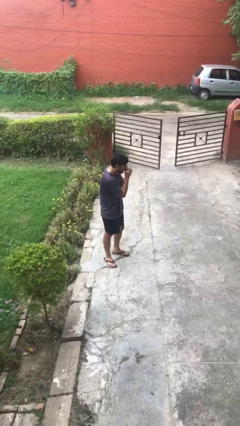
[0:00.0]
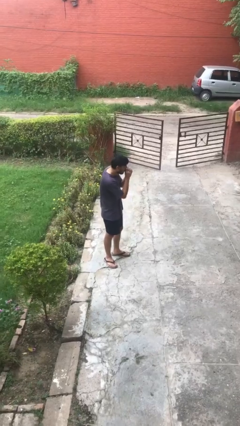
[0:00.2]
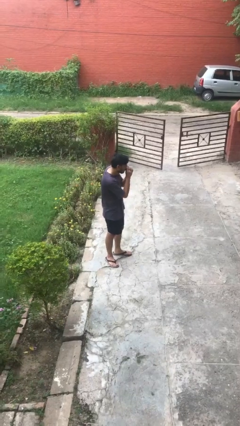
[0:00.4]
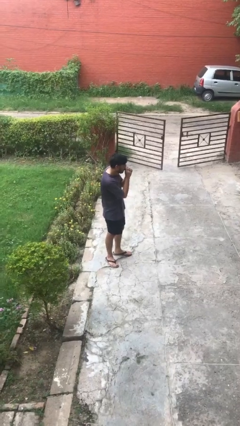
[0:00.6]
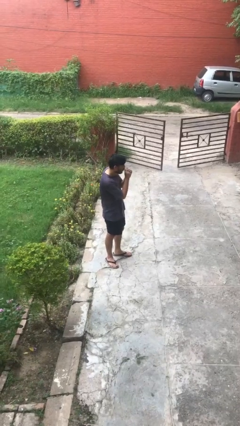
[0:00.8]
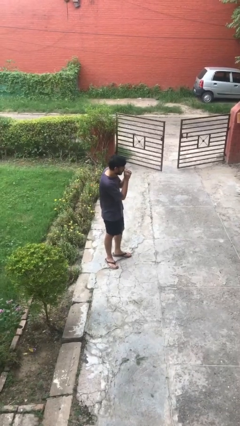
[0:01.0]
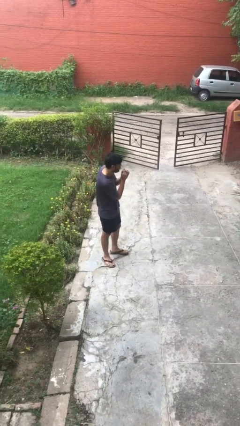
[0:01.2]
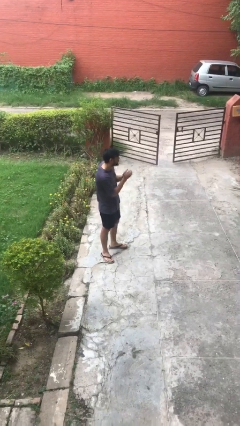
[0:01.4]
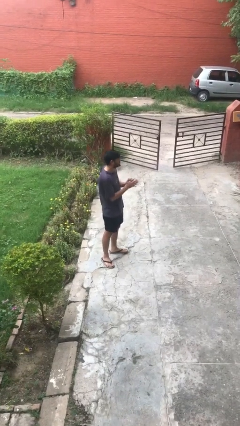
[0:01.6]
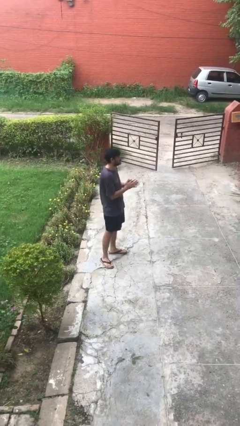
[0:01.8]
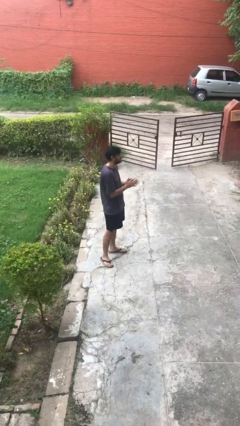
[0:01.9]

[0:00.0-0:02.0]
person blows into hands

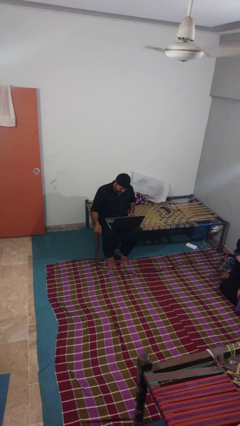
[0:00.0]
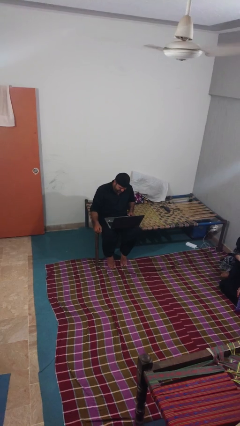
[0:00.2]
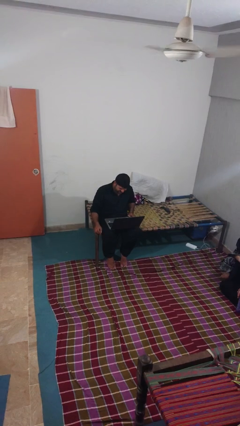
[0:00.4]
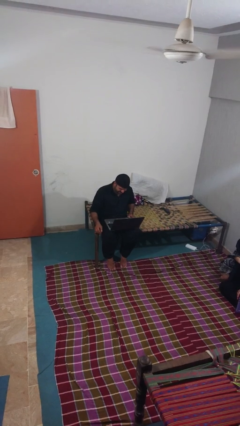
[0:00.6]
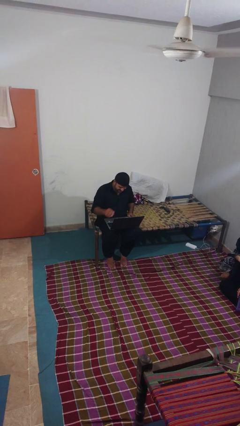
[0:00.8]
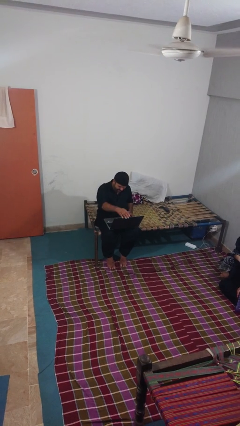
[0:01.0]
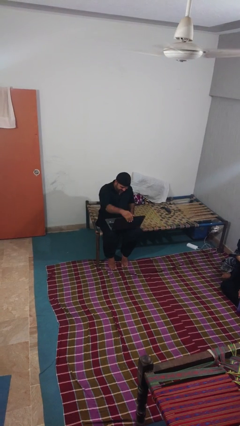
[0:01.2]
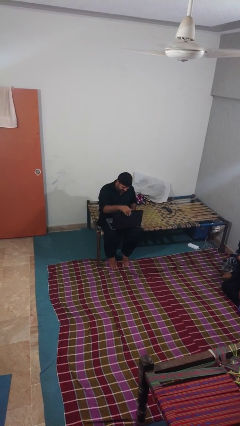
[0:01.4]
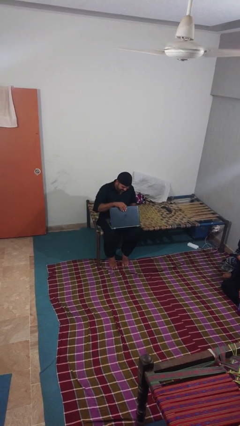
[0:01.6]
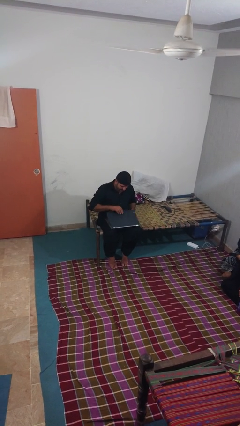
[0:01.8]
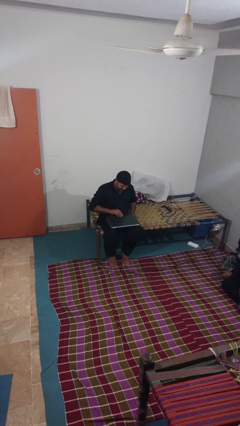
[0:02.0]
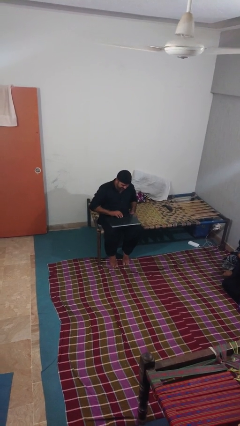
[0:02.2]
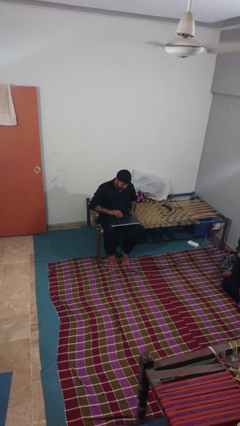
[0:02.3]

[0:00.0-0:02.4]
person closes laptop

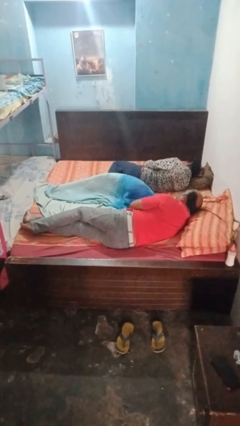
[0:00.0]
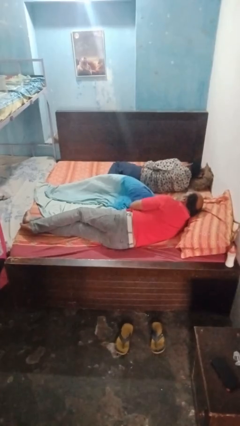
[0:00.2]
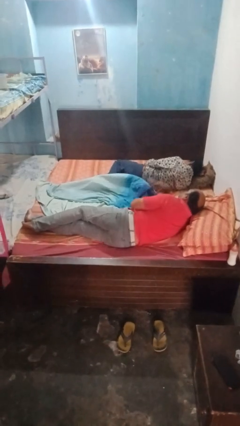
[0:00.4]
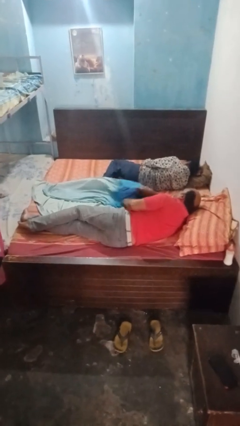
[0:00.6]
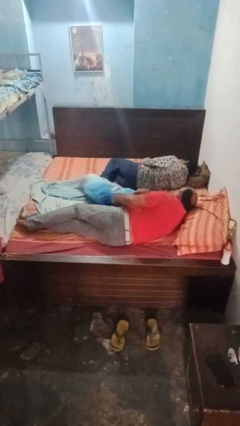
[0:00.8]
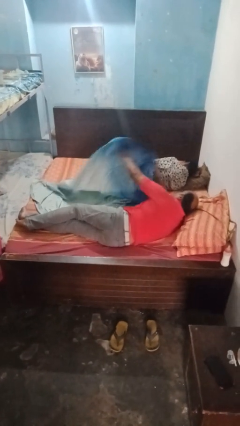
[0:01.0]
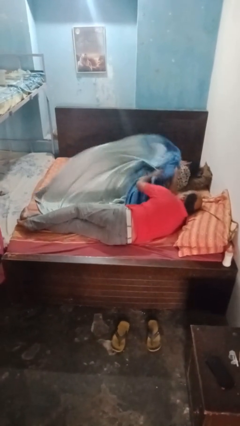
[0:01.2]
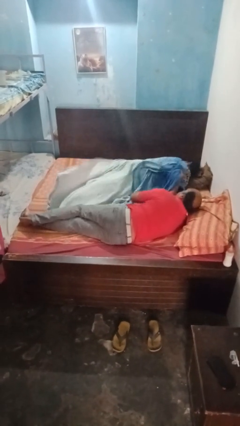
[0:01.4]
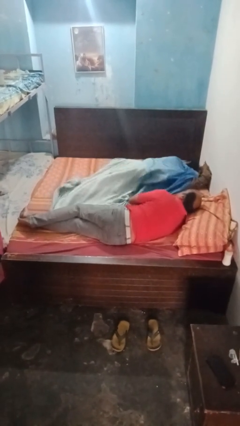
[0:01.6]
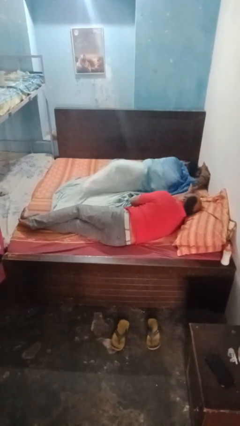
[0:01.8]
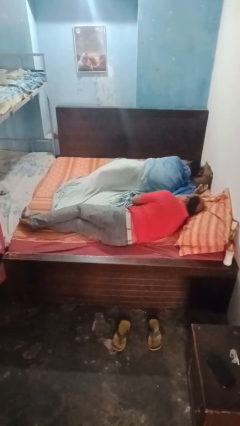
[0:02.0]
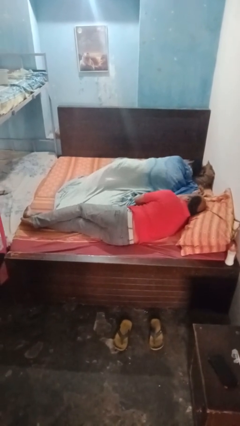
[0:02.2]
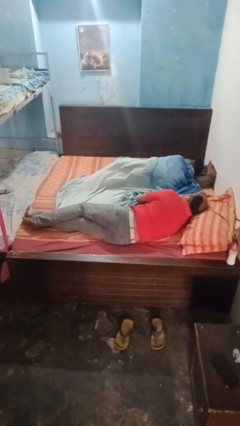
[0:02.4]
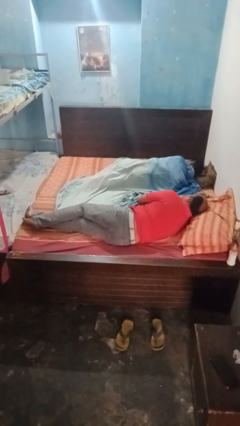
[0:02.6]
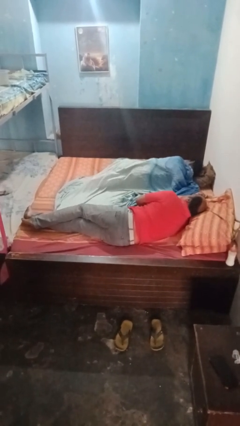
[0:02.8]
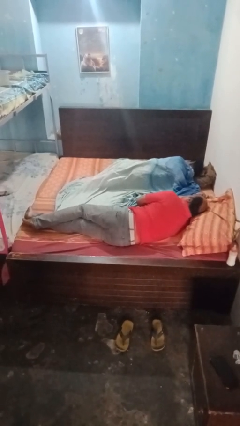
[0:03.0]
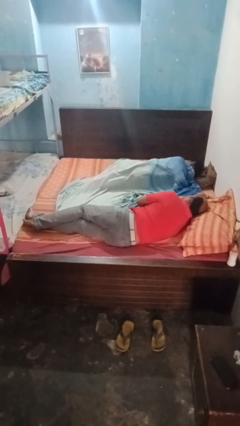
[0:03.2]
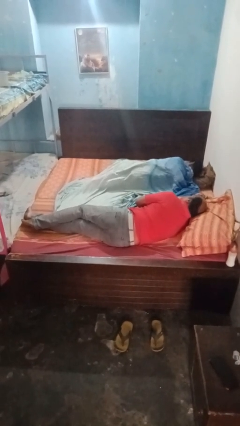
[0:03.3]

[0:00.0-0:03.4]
person covers friend with blanket

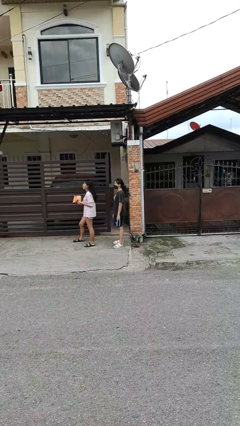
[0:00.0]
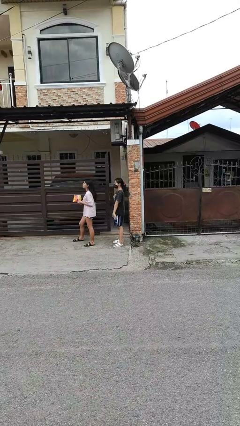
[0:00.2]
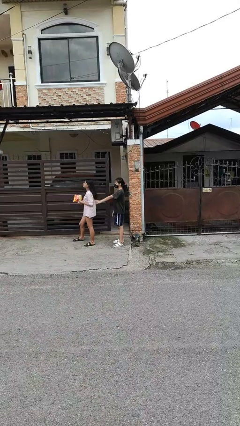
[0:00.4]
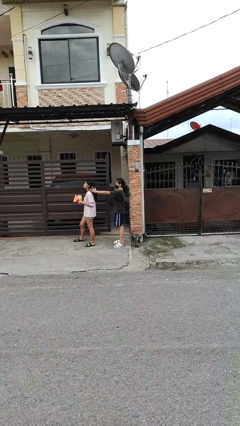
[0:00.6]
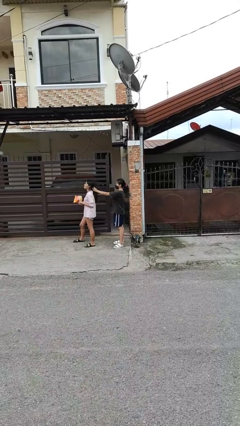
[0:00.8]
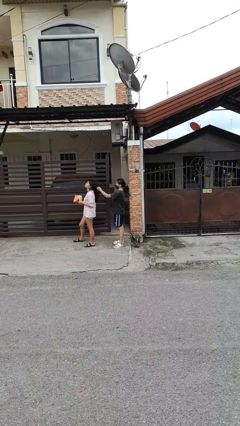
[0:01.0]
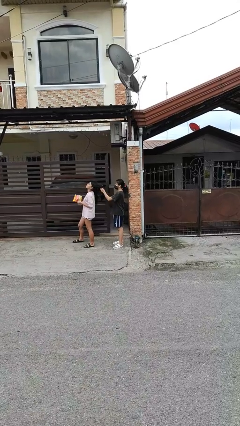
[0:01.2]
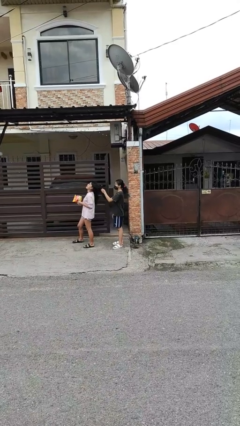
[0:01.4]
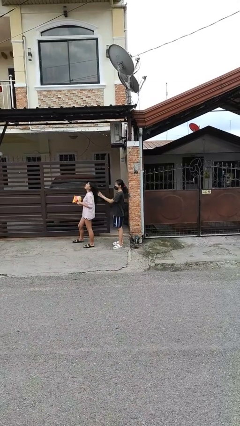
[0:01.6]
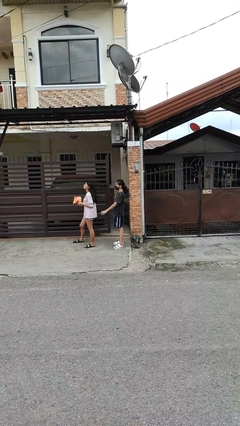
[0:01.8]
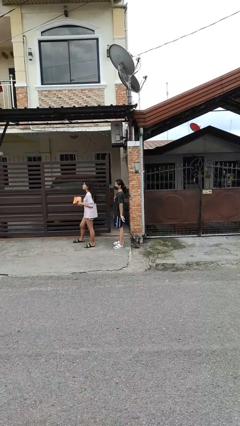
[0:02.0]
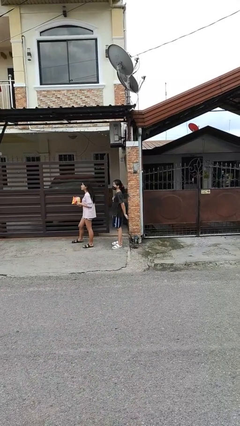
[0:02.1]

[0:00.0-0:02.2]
person grabs person by hair

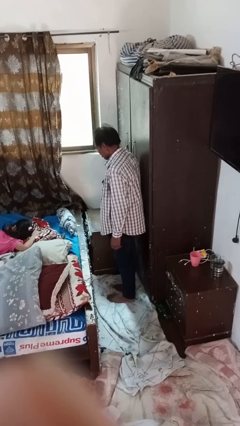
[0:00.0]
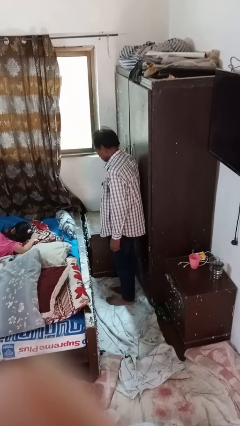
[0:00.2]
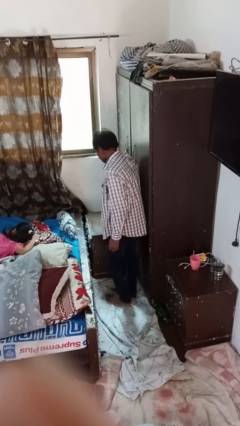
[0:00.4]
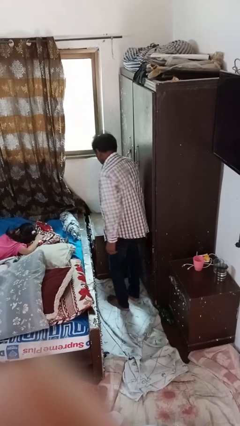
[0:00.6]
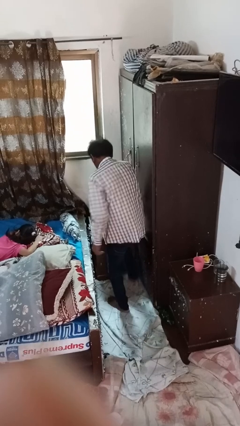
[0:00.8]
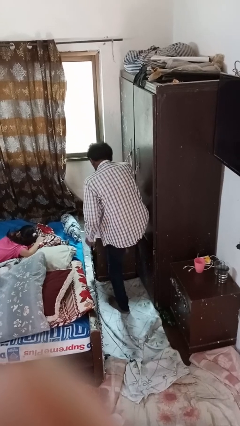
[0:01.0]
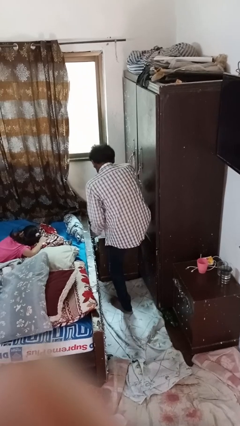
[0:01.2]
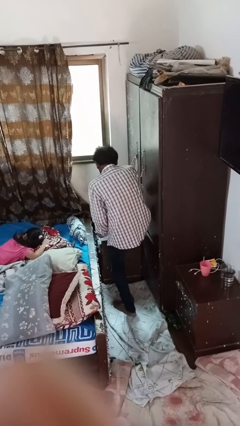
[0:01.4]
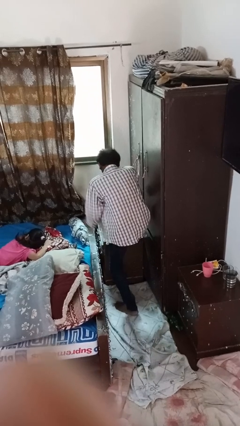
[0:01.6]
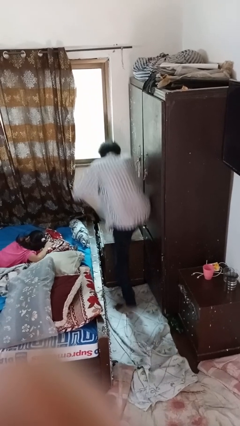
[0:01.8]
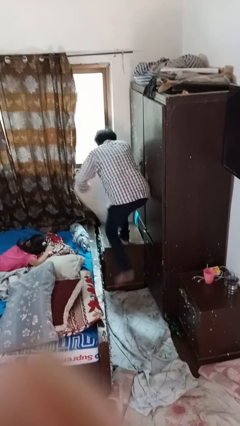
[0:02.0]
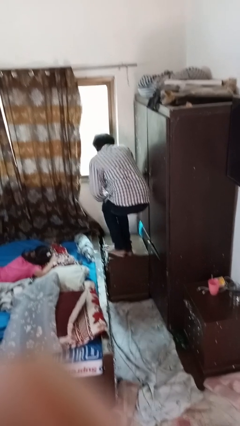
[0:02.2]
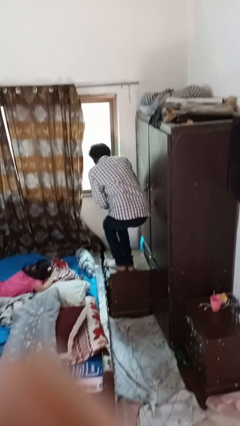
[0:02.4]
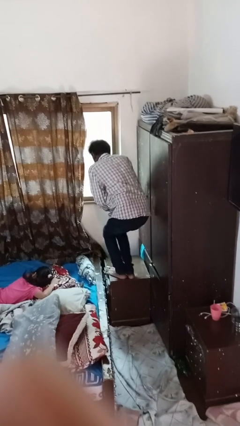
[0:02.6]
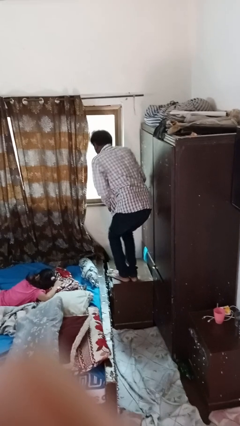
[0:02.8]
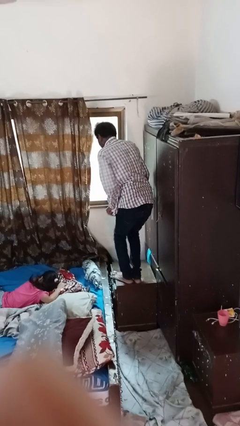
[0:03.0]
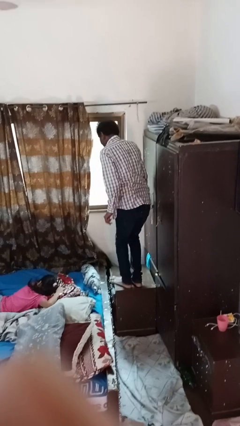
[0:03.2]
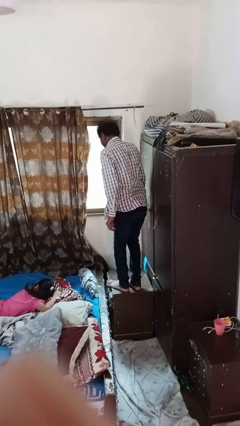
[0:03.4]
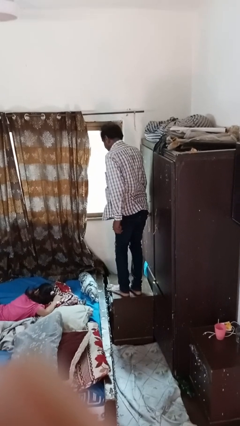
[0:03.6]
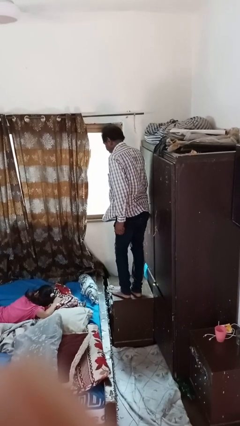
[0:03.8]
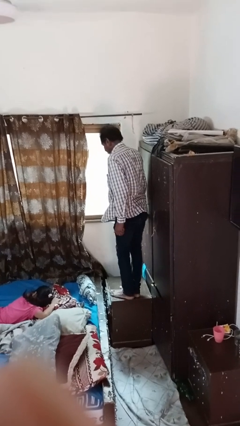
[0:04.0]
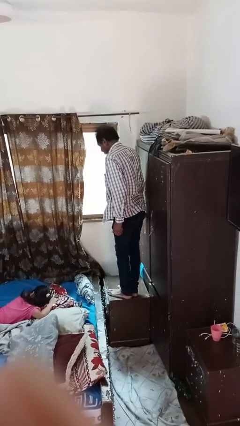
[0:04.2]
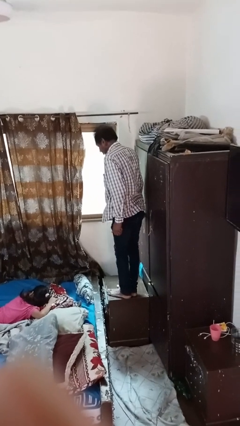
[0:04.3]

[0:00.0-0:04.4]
person climbs on table

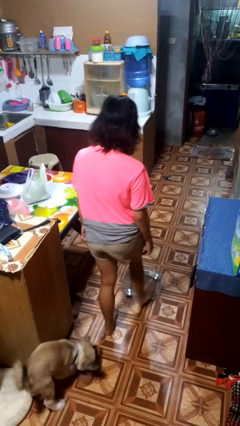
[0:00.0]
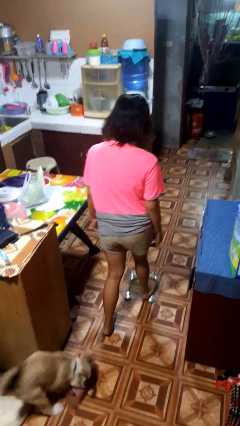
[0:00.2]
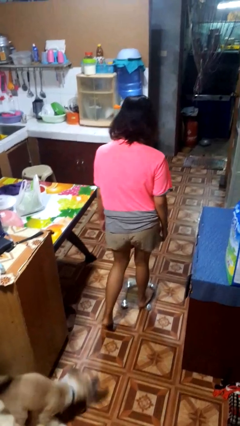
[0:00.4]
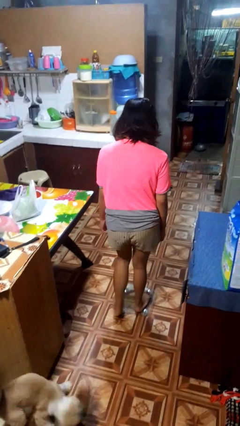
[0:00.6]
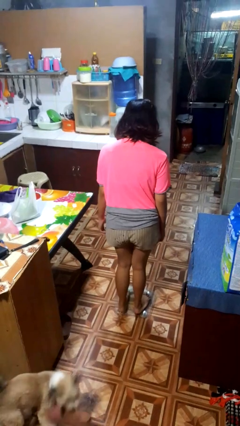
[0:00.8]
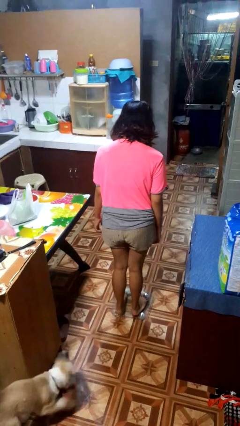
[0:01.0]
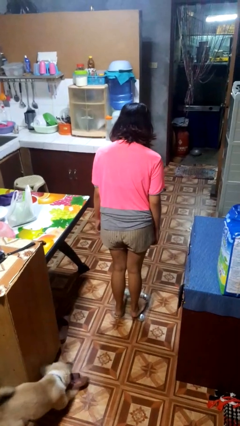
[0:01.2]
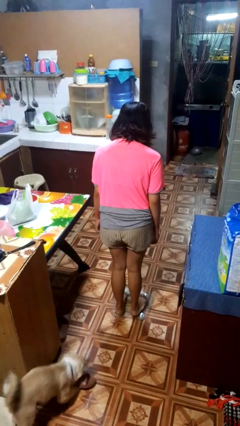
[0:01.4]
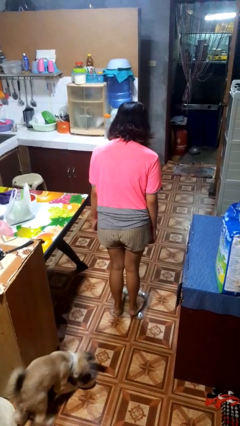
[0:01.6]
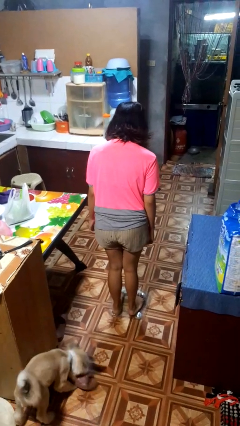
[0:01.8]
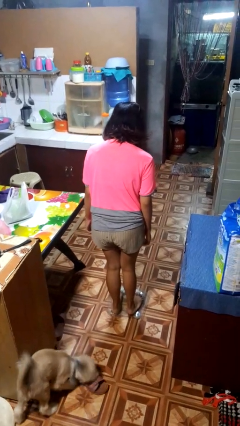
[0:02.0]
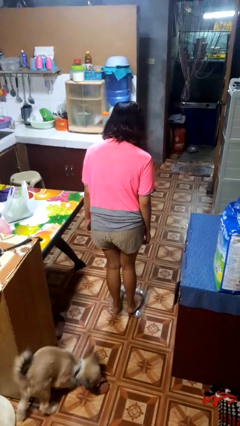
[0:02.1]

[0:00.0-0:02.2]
person uses bodyweight scale

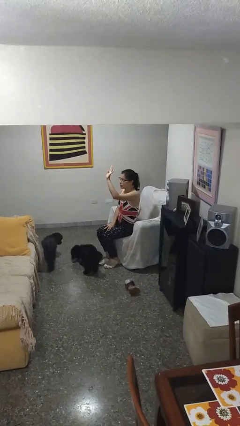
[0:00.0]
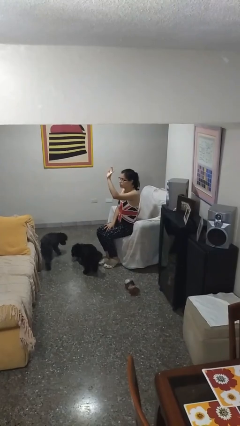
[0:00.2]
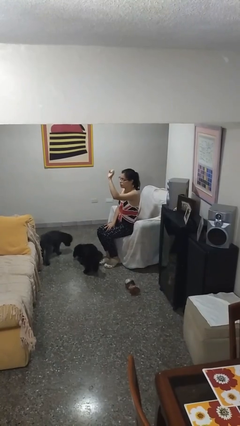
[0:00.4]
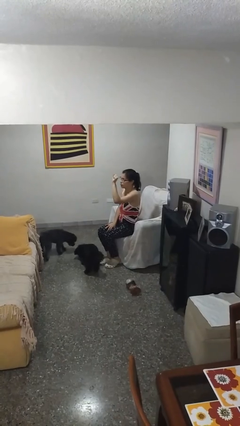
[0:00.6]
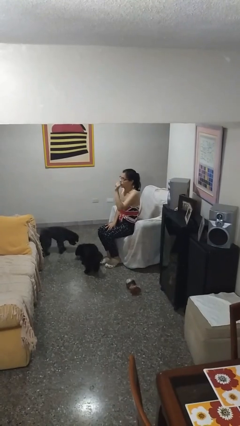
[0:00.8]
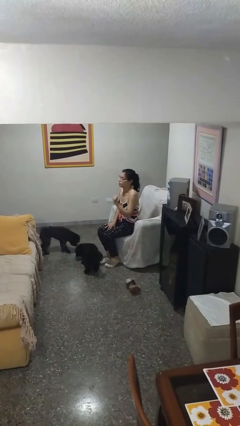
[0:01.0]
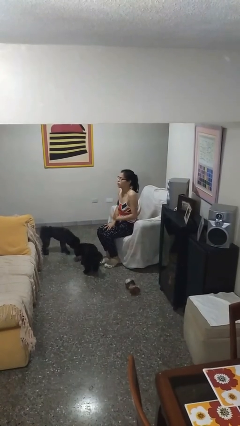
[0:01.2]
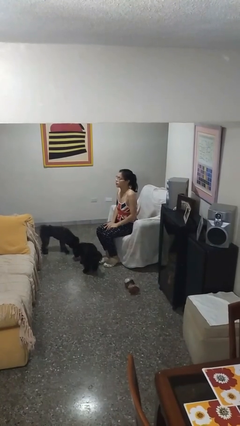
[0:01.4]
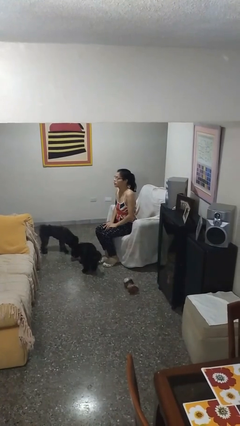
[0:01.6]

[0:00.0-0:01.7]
person gestures lower hand
